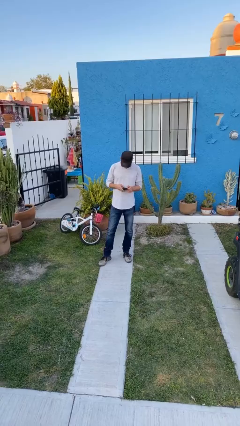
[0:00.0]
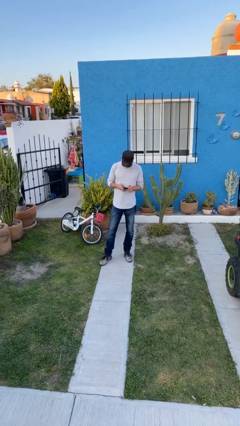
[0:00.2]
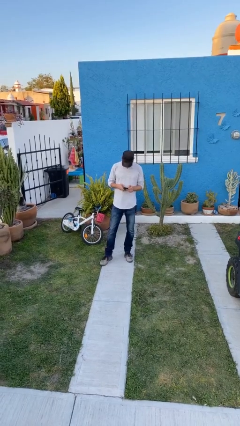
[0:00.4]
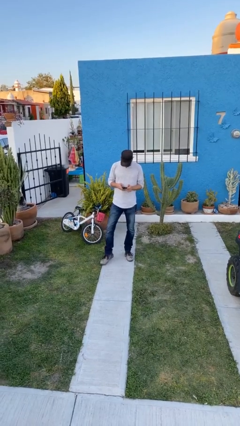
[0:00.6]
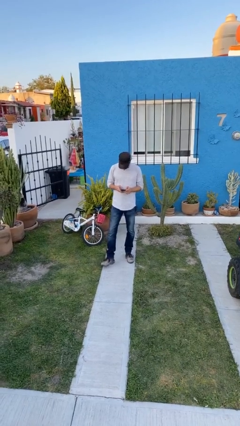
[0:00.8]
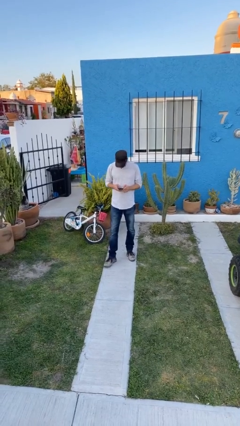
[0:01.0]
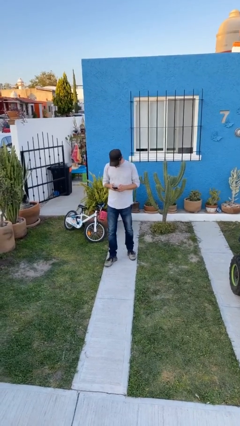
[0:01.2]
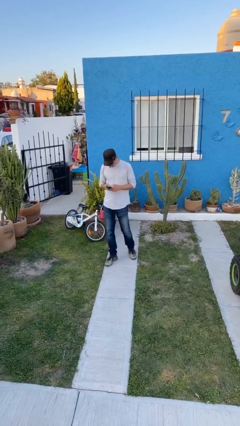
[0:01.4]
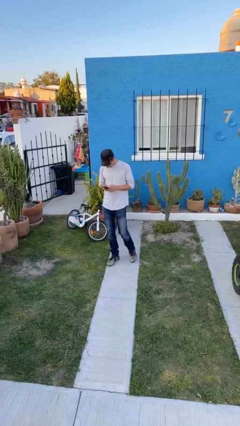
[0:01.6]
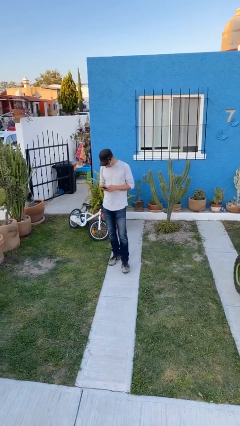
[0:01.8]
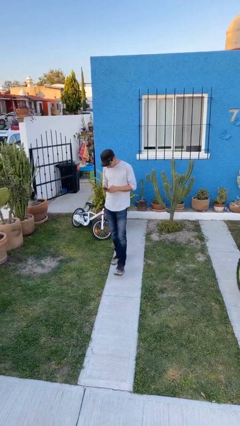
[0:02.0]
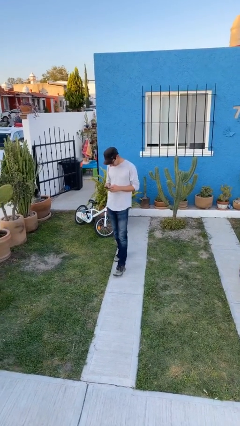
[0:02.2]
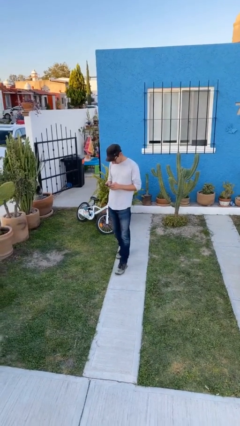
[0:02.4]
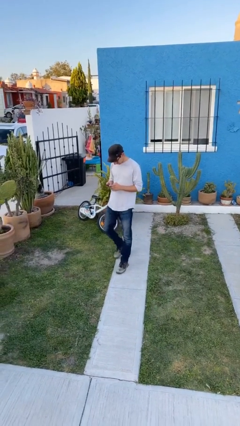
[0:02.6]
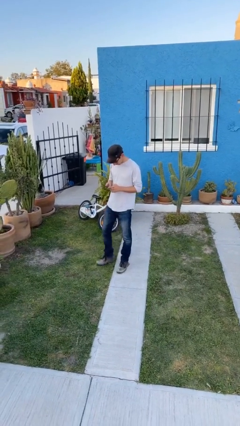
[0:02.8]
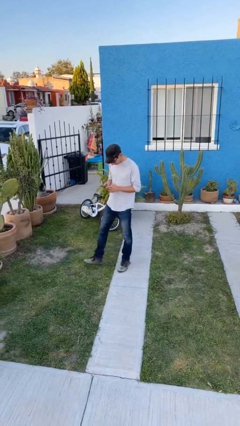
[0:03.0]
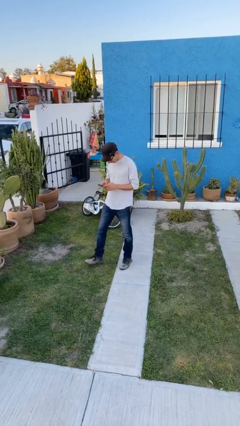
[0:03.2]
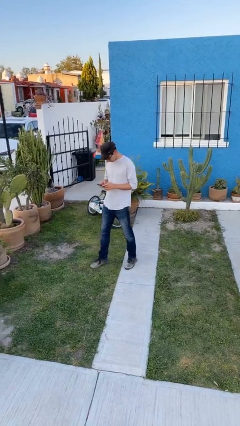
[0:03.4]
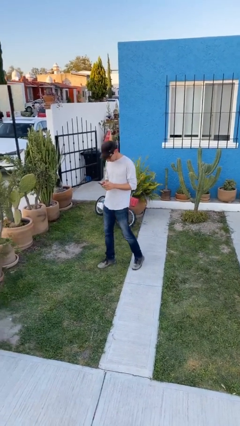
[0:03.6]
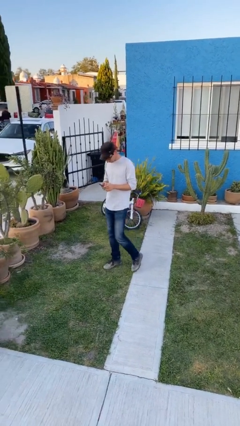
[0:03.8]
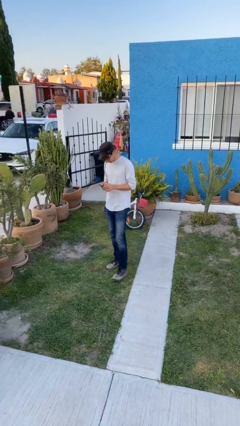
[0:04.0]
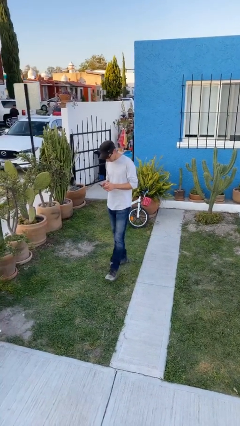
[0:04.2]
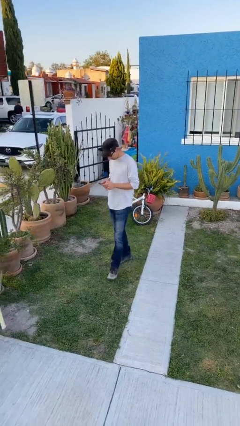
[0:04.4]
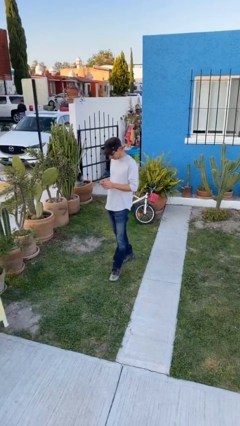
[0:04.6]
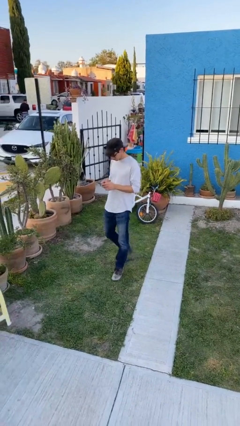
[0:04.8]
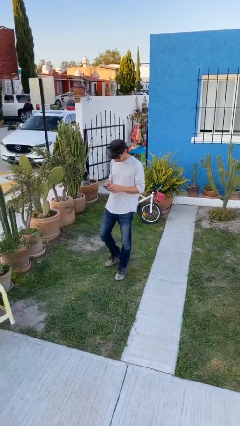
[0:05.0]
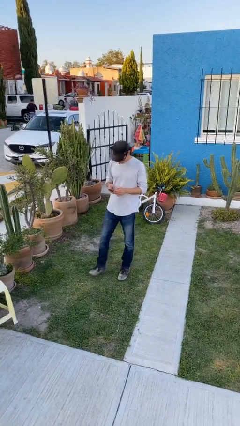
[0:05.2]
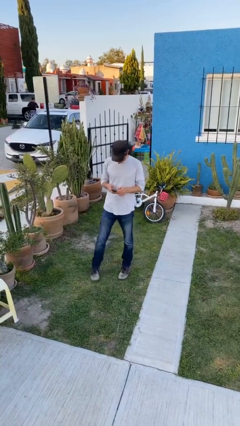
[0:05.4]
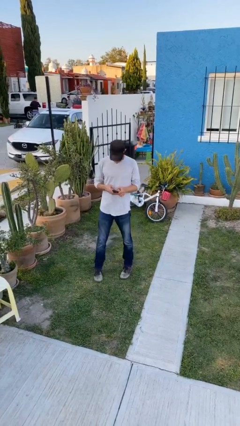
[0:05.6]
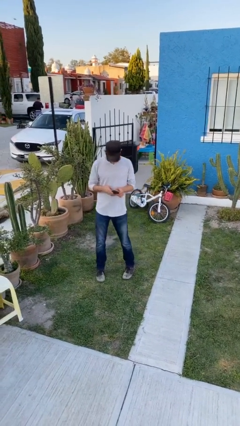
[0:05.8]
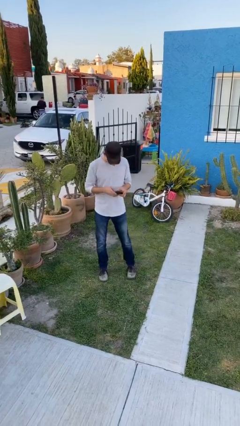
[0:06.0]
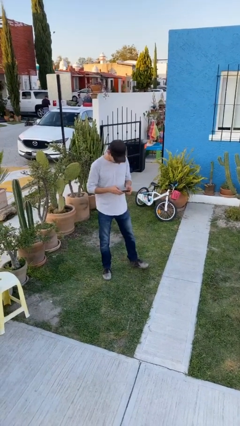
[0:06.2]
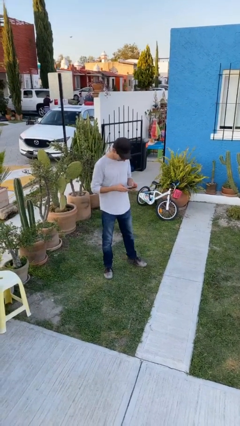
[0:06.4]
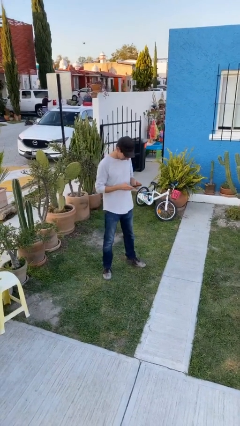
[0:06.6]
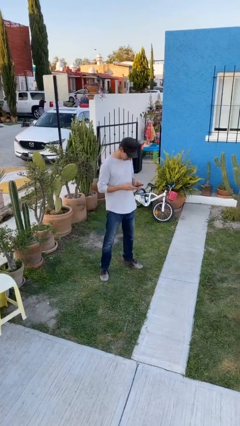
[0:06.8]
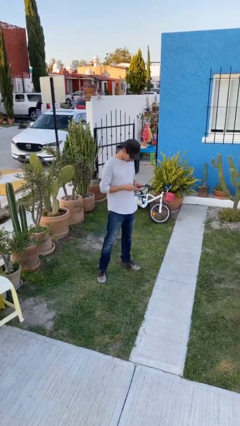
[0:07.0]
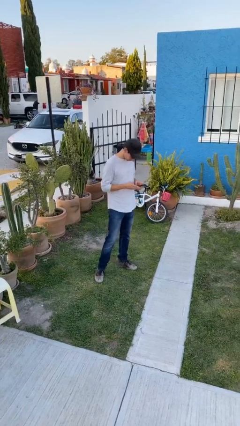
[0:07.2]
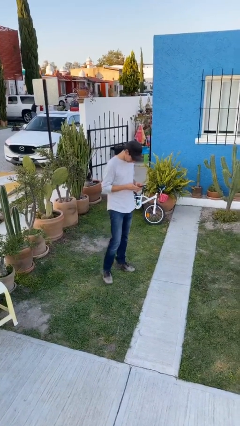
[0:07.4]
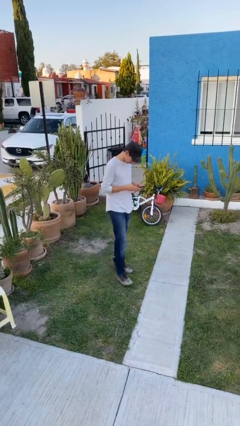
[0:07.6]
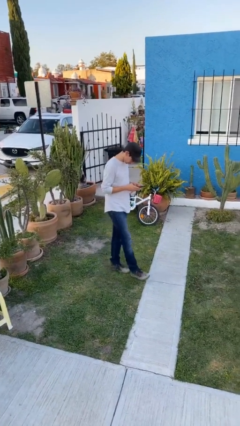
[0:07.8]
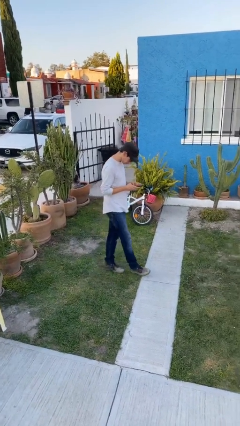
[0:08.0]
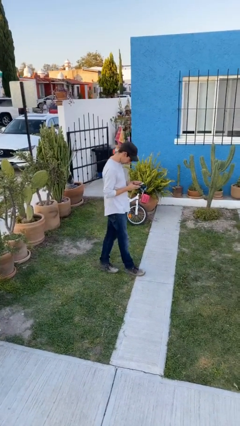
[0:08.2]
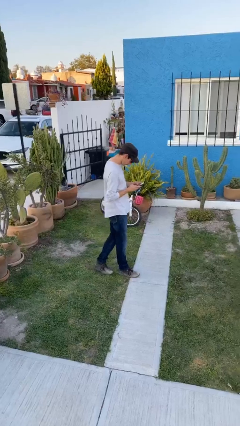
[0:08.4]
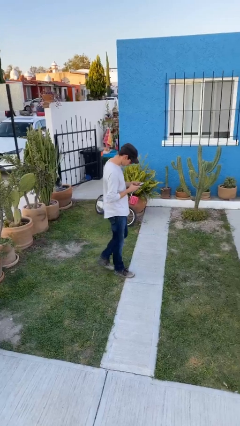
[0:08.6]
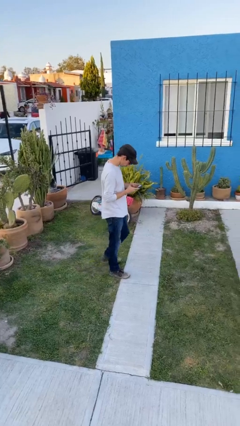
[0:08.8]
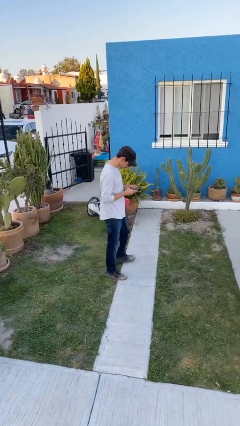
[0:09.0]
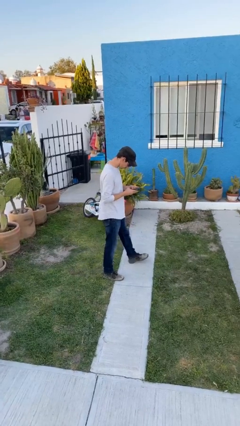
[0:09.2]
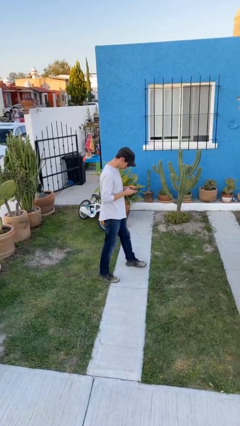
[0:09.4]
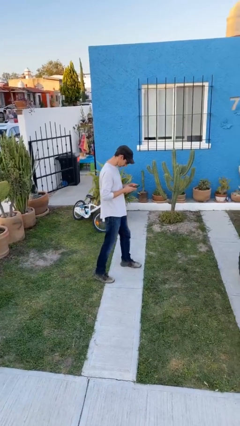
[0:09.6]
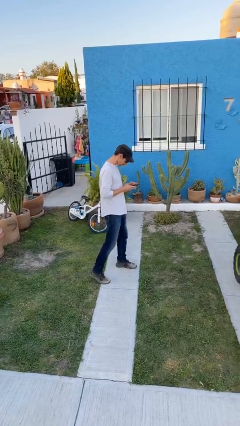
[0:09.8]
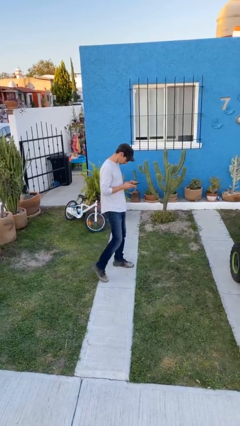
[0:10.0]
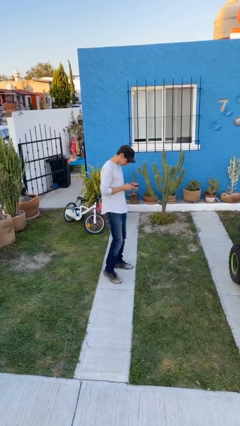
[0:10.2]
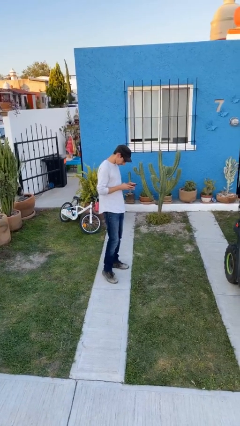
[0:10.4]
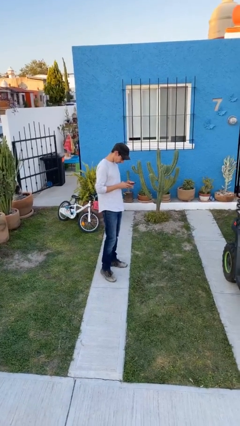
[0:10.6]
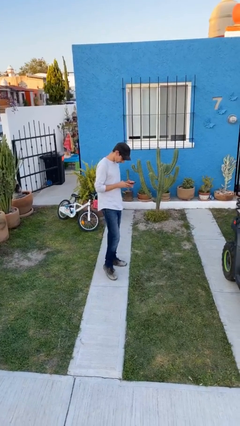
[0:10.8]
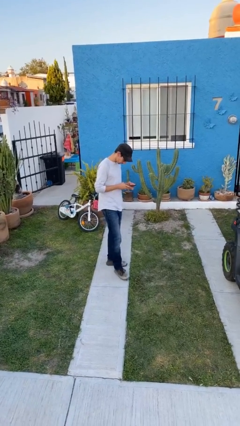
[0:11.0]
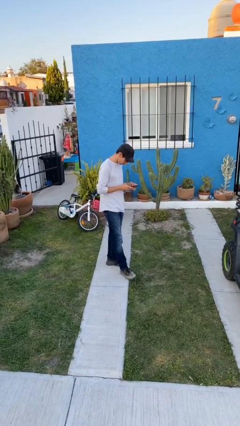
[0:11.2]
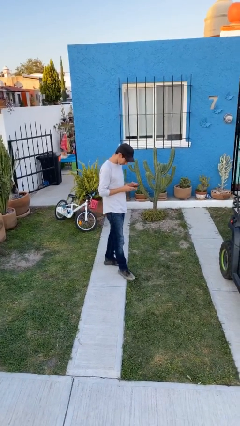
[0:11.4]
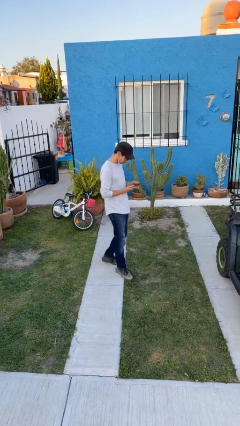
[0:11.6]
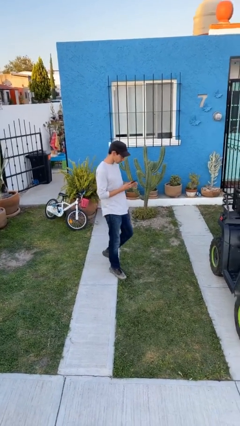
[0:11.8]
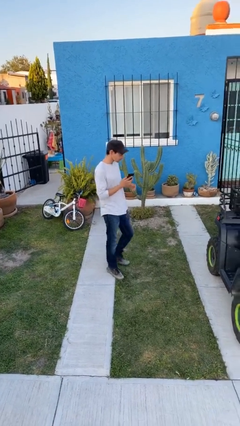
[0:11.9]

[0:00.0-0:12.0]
person texts on phone

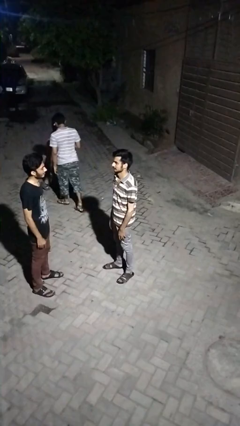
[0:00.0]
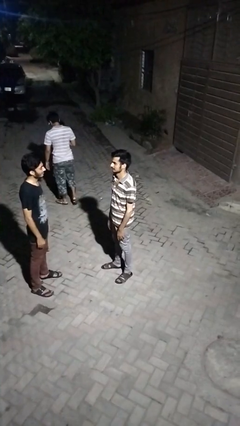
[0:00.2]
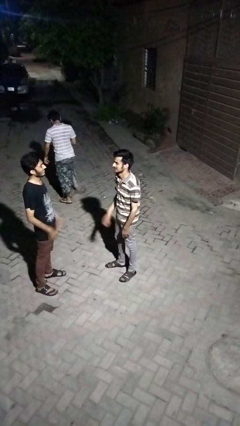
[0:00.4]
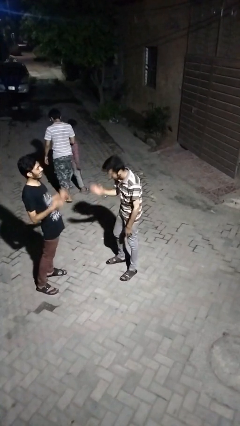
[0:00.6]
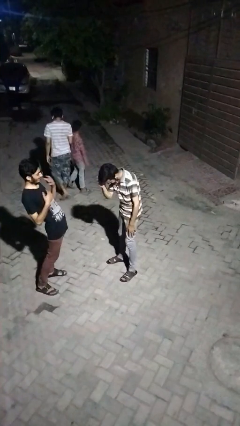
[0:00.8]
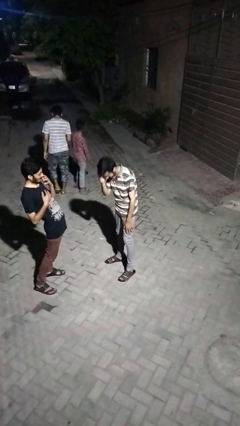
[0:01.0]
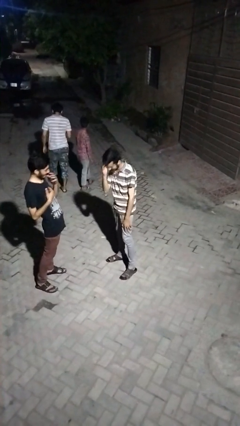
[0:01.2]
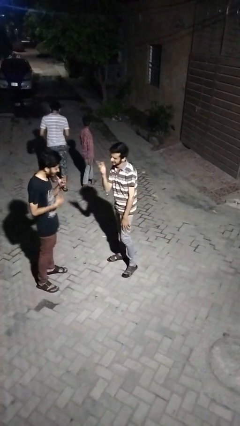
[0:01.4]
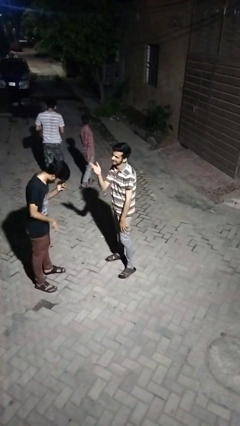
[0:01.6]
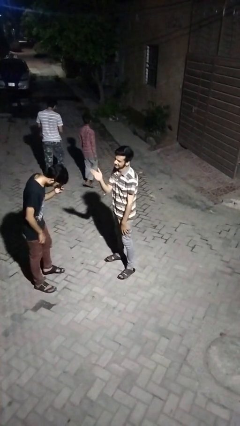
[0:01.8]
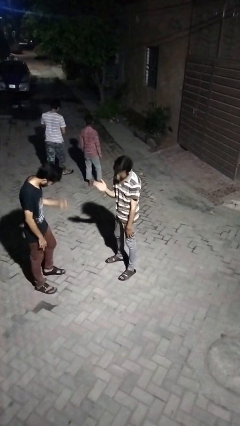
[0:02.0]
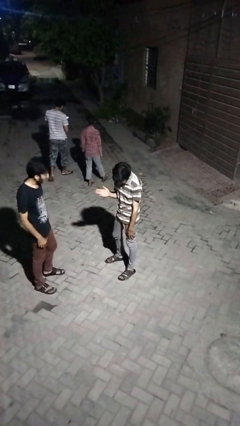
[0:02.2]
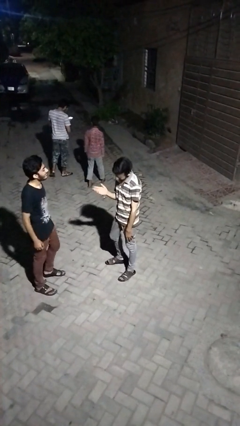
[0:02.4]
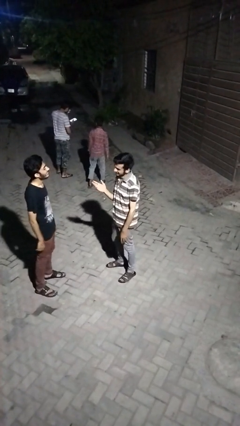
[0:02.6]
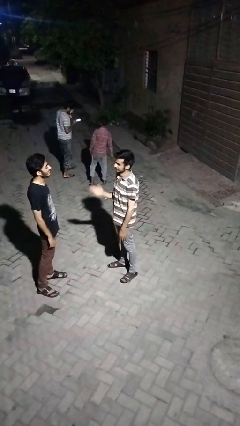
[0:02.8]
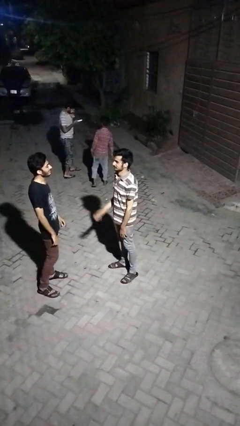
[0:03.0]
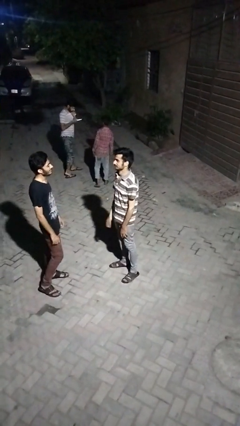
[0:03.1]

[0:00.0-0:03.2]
person laughs with person

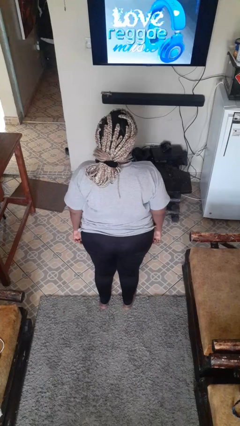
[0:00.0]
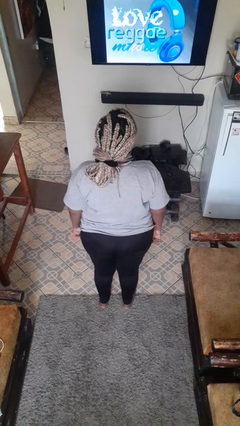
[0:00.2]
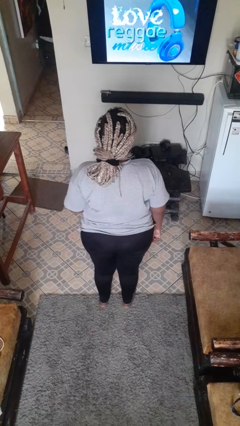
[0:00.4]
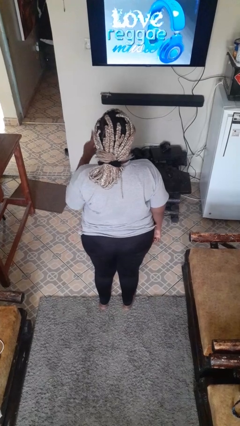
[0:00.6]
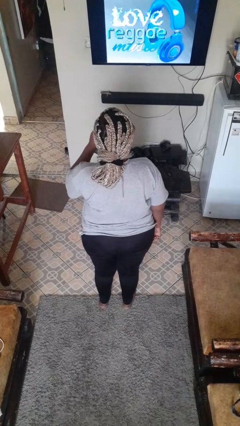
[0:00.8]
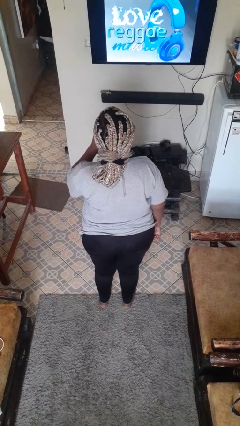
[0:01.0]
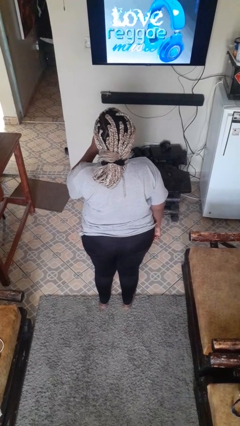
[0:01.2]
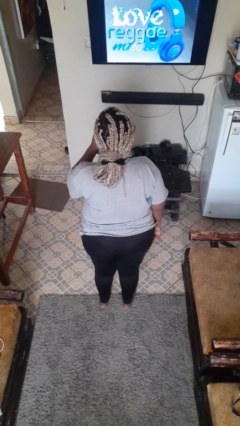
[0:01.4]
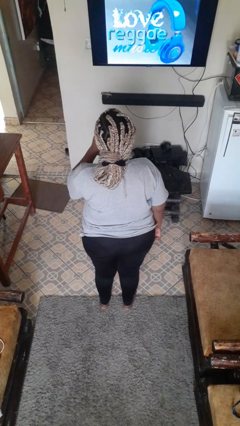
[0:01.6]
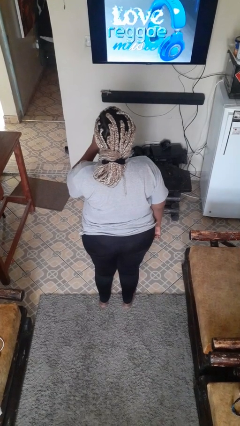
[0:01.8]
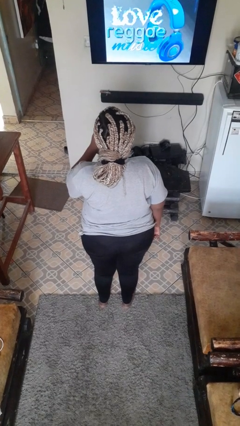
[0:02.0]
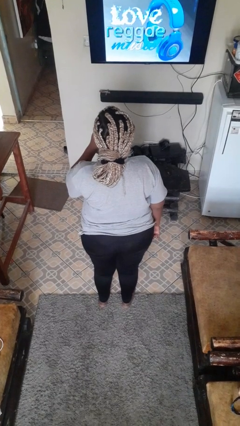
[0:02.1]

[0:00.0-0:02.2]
person gestures be quiet

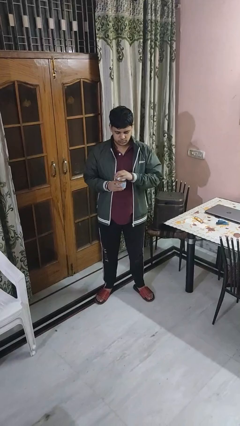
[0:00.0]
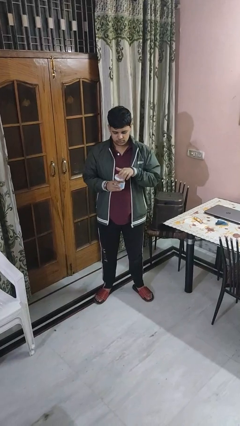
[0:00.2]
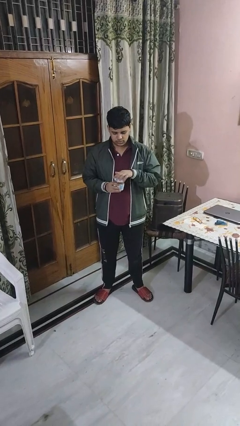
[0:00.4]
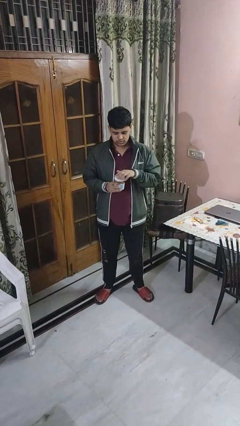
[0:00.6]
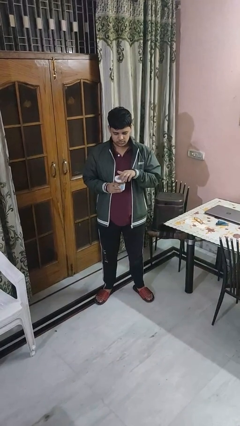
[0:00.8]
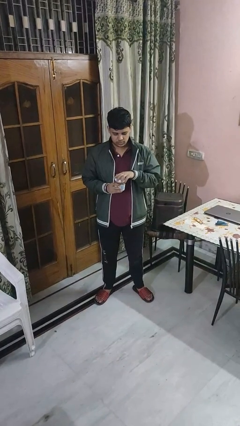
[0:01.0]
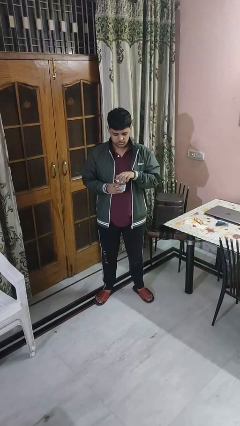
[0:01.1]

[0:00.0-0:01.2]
person opens jar
